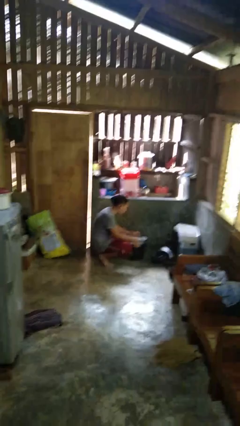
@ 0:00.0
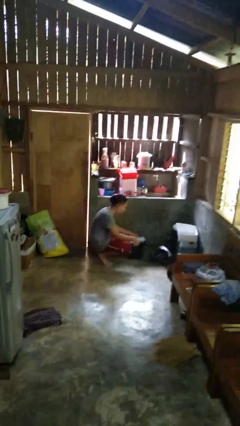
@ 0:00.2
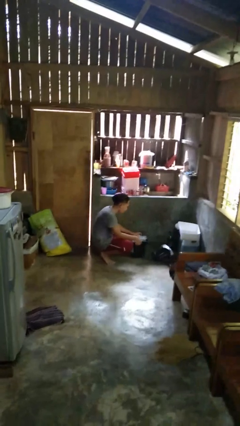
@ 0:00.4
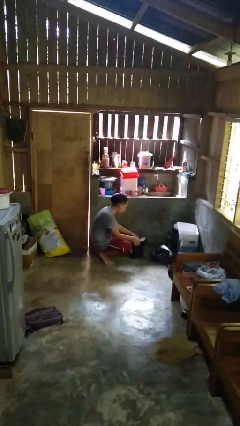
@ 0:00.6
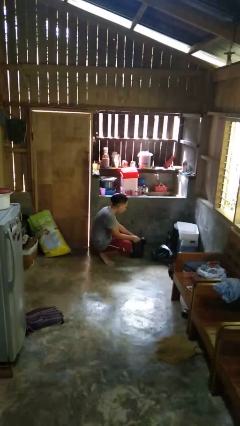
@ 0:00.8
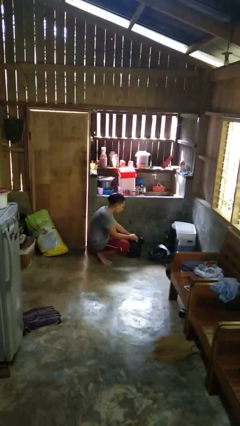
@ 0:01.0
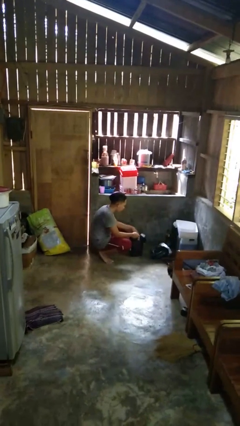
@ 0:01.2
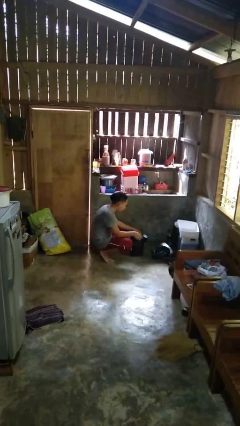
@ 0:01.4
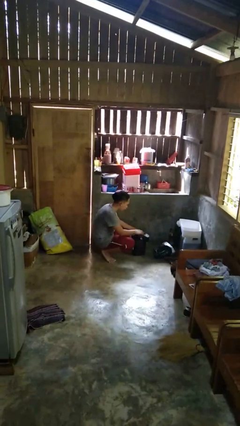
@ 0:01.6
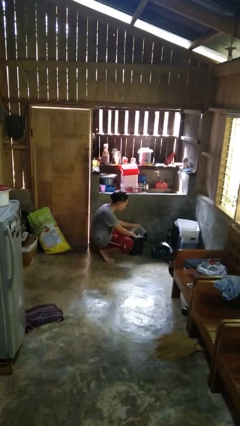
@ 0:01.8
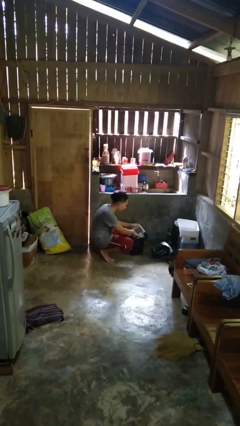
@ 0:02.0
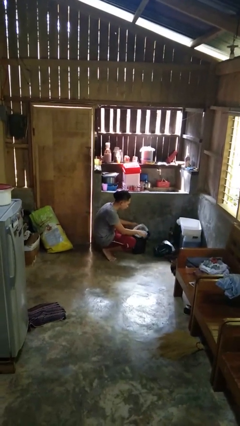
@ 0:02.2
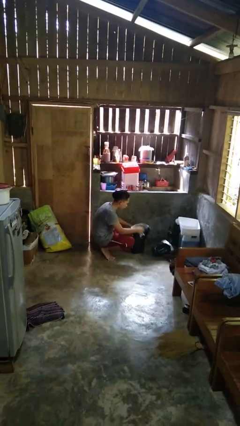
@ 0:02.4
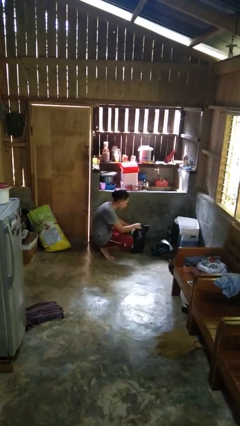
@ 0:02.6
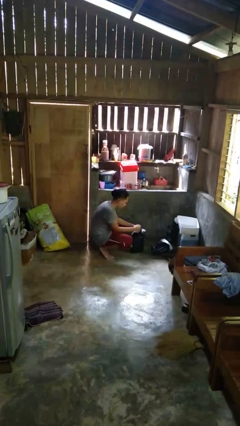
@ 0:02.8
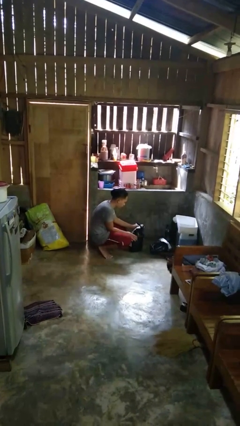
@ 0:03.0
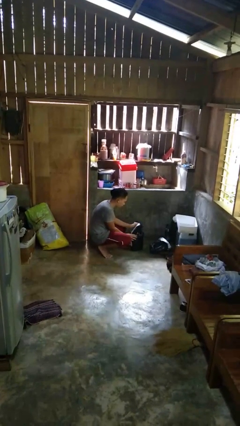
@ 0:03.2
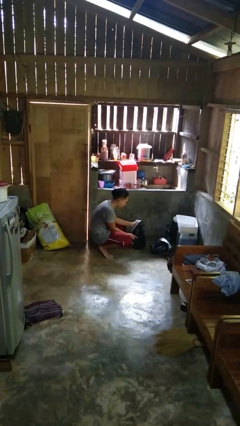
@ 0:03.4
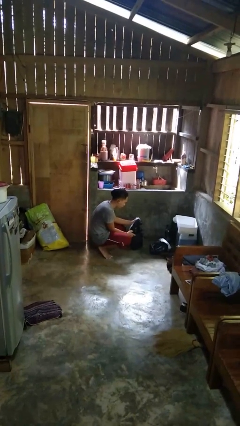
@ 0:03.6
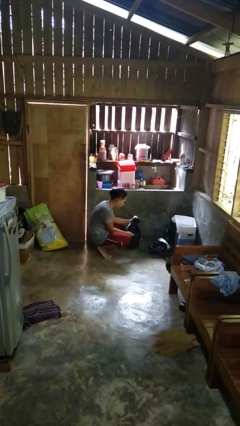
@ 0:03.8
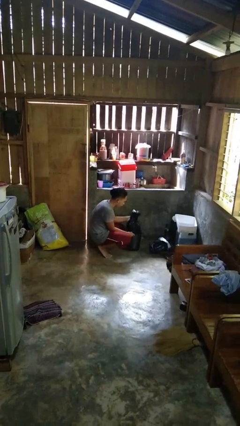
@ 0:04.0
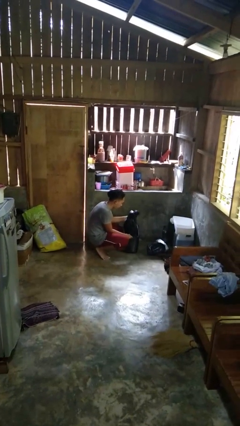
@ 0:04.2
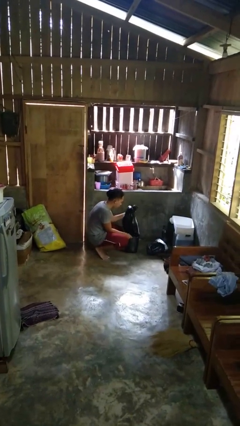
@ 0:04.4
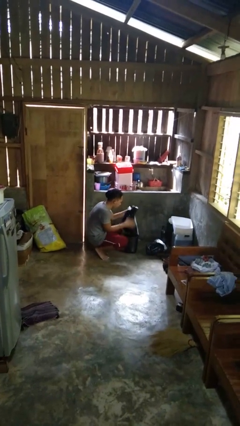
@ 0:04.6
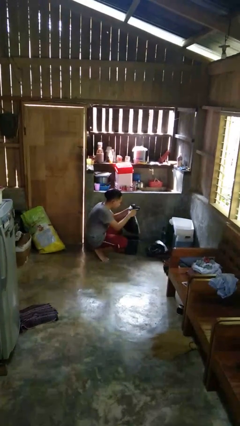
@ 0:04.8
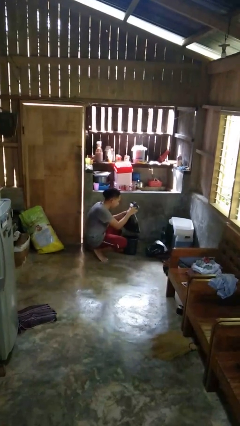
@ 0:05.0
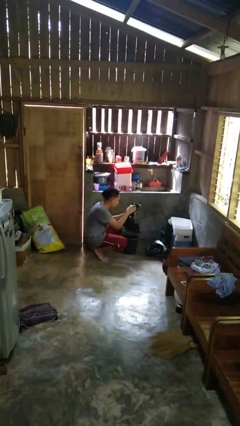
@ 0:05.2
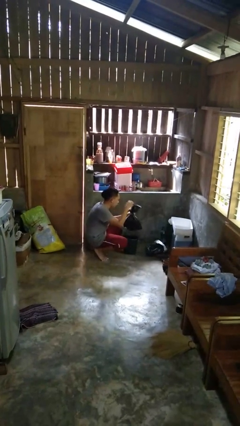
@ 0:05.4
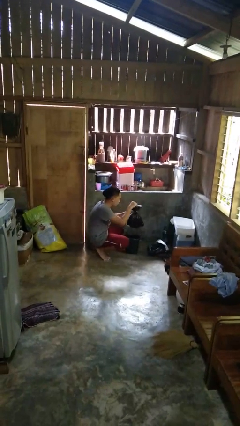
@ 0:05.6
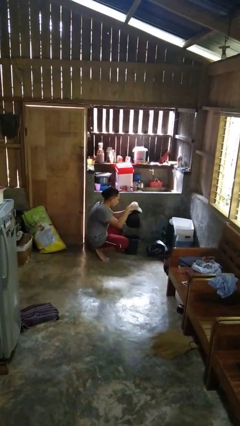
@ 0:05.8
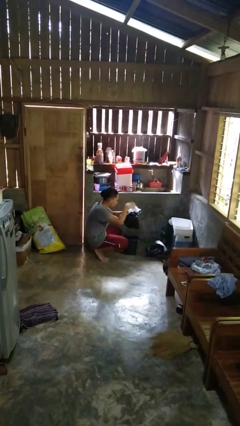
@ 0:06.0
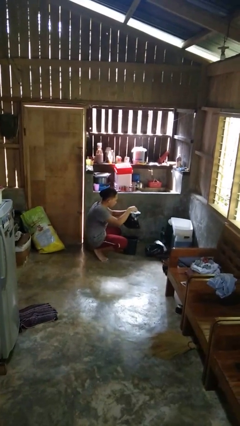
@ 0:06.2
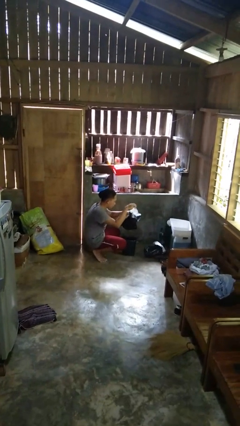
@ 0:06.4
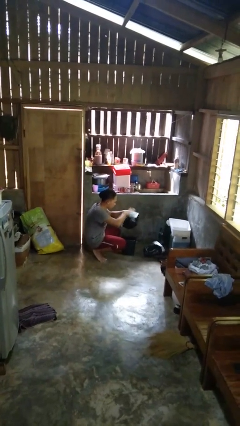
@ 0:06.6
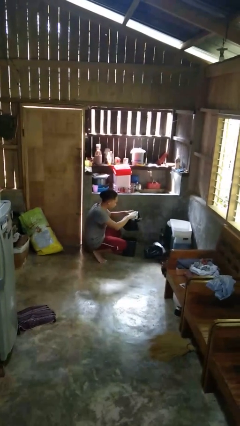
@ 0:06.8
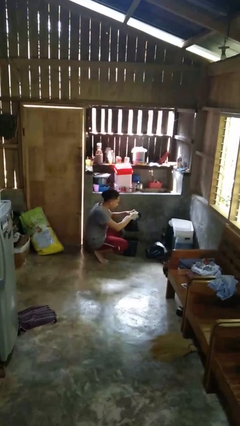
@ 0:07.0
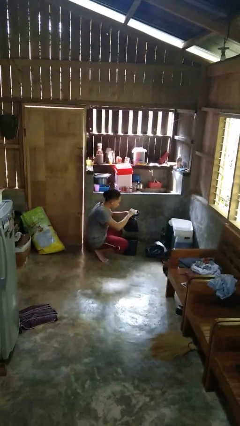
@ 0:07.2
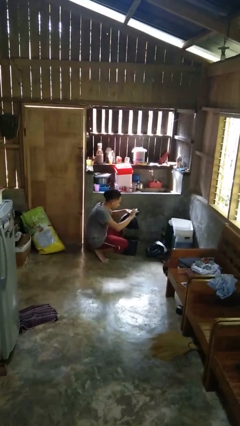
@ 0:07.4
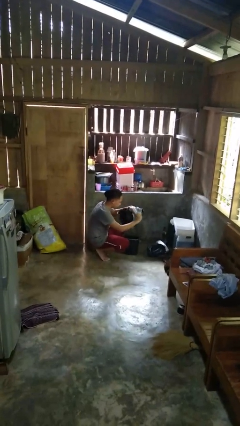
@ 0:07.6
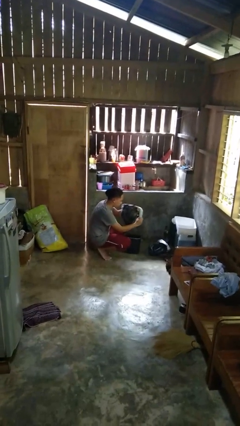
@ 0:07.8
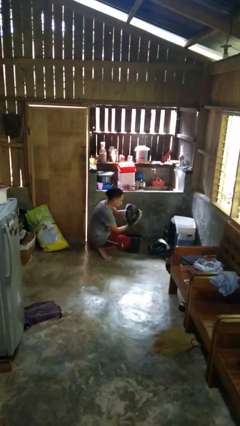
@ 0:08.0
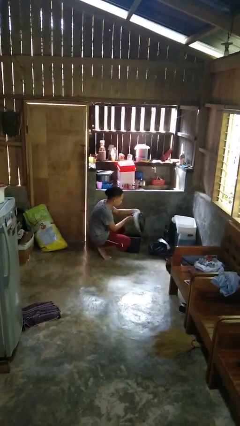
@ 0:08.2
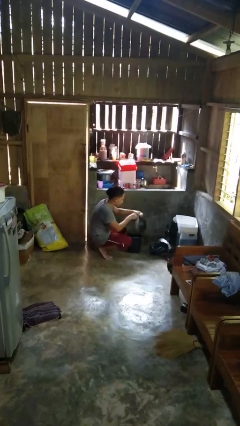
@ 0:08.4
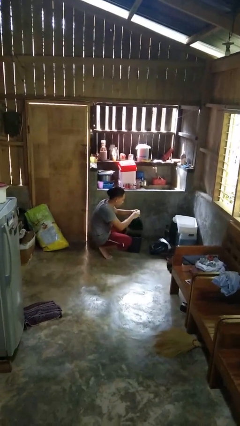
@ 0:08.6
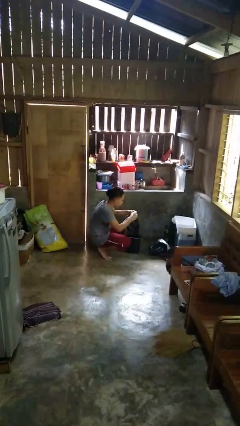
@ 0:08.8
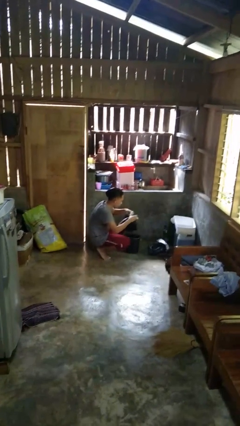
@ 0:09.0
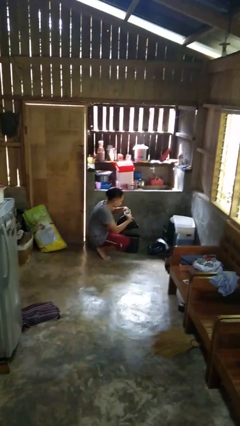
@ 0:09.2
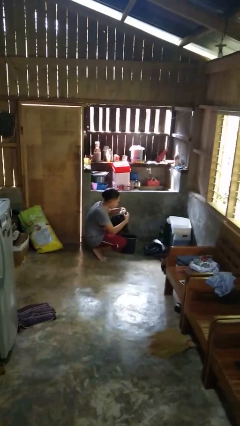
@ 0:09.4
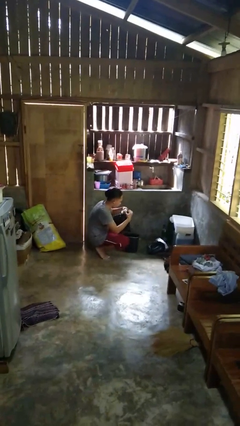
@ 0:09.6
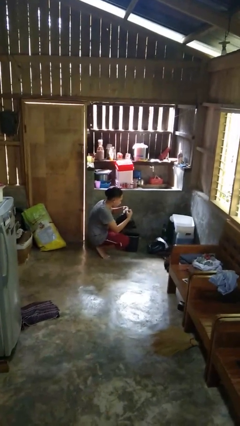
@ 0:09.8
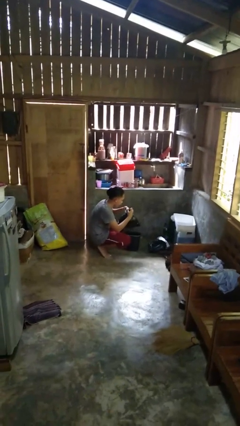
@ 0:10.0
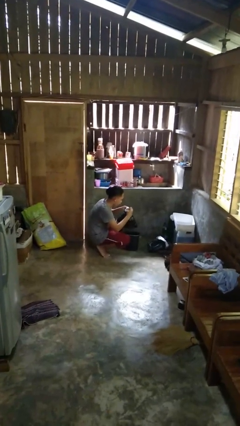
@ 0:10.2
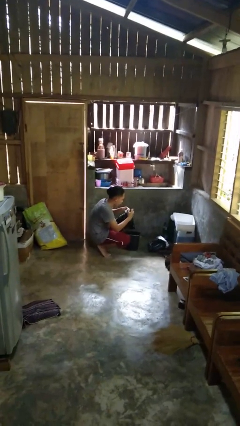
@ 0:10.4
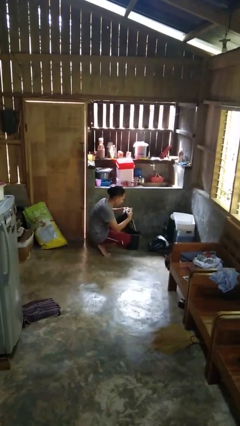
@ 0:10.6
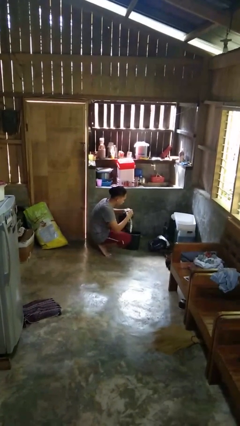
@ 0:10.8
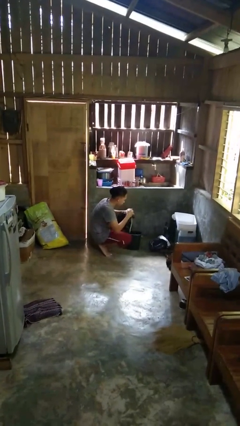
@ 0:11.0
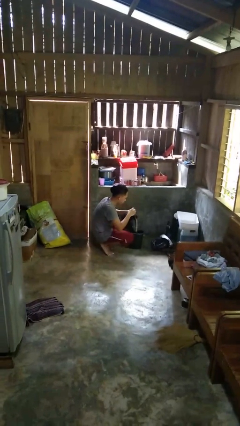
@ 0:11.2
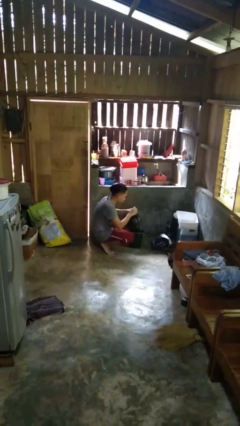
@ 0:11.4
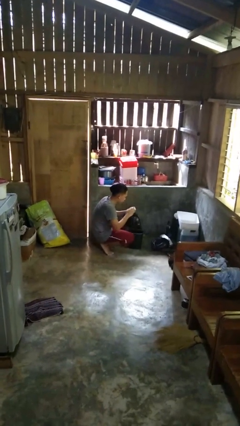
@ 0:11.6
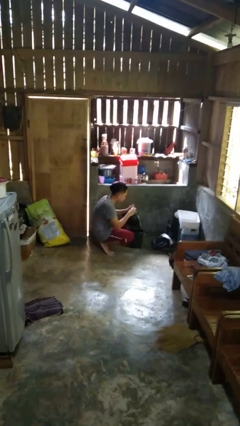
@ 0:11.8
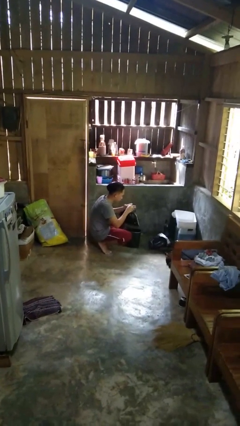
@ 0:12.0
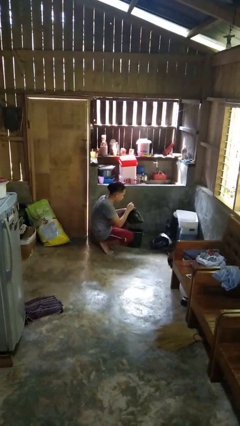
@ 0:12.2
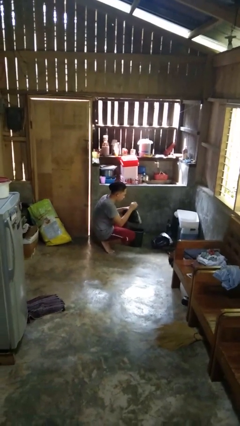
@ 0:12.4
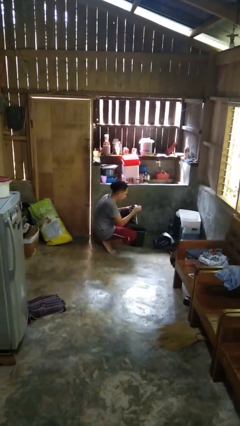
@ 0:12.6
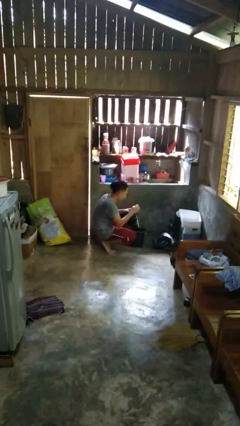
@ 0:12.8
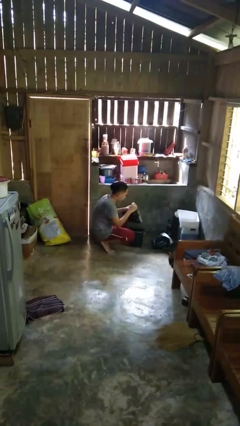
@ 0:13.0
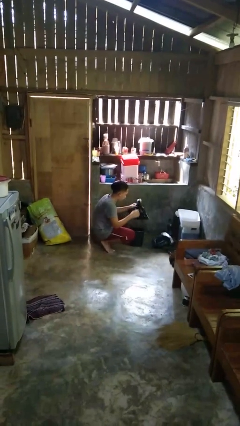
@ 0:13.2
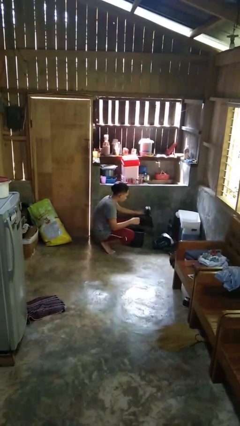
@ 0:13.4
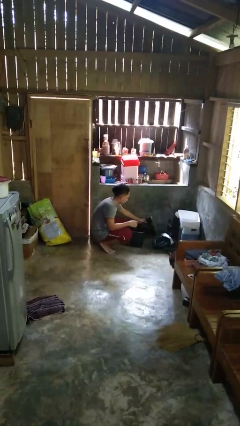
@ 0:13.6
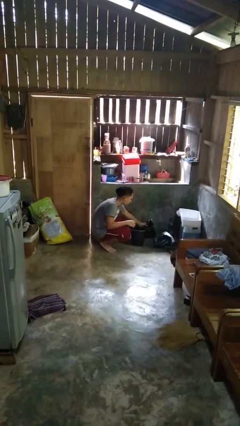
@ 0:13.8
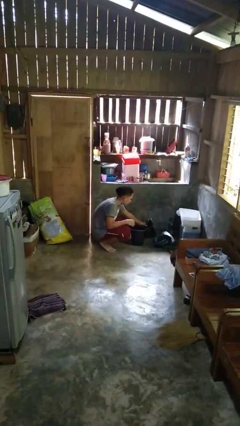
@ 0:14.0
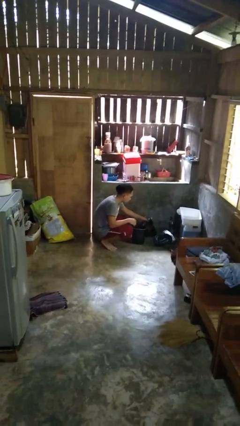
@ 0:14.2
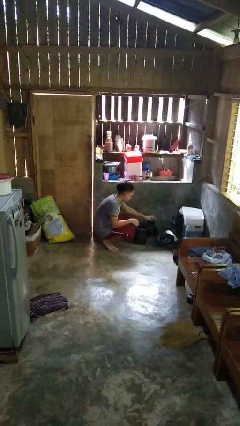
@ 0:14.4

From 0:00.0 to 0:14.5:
person removes trashbag from trashcan

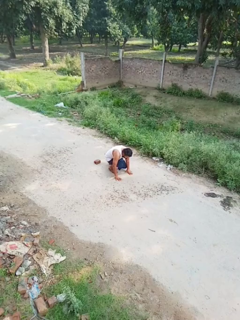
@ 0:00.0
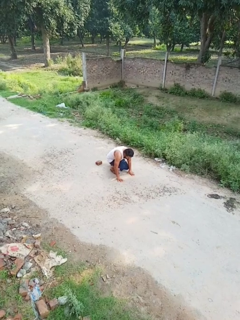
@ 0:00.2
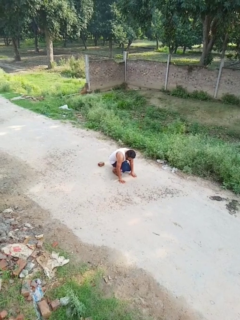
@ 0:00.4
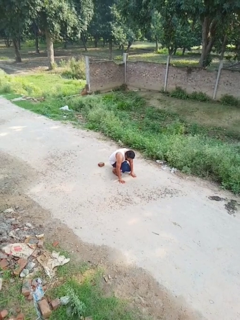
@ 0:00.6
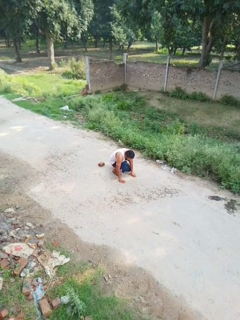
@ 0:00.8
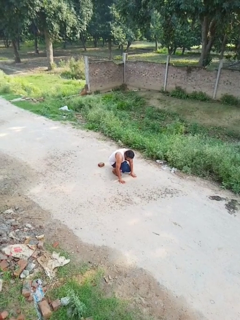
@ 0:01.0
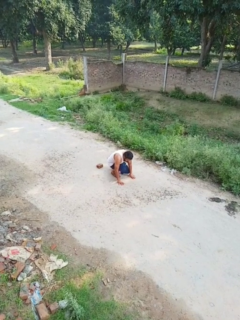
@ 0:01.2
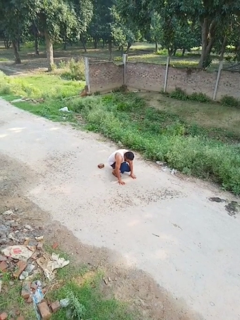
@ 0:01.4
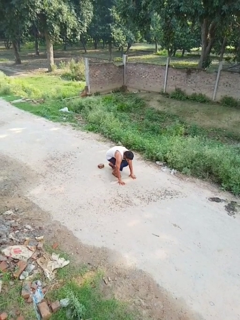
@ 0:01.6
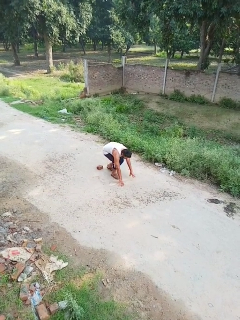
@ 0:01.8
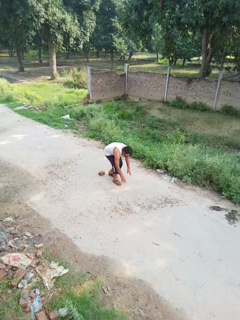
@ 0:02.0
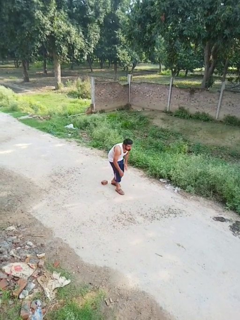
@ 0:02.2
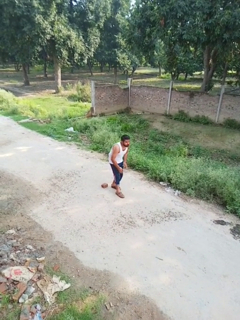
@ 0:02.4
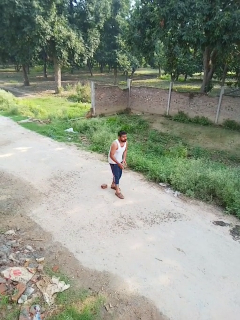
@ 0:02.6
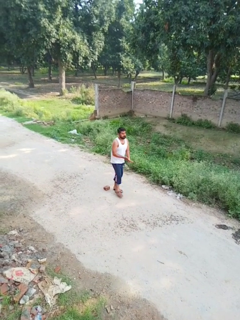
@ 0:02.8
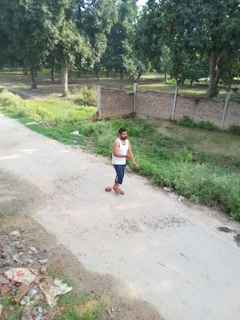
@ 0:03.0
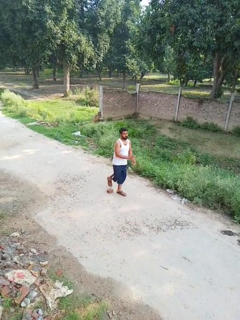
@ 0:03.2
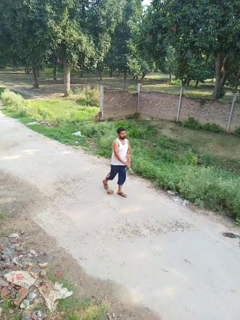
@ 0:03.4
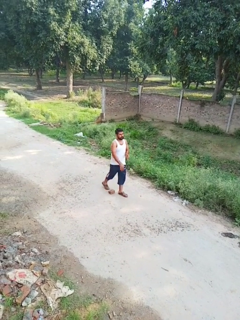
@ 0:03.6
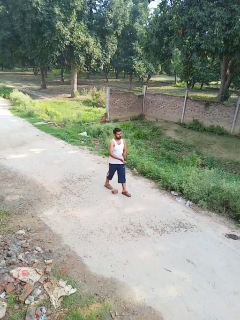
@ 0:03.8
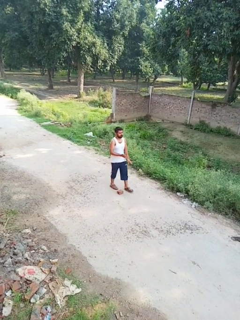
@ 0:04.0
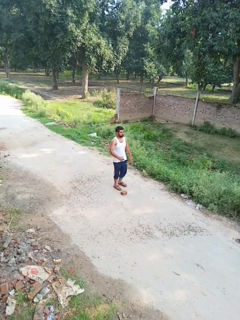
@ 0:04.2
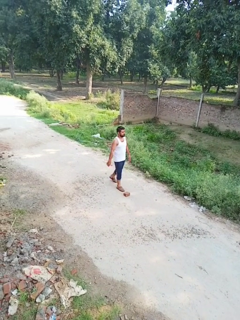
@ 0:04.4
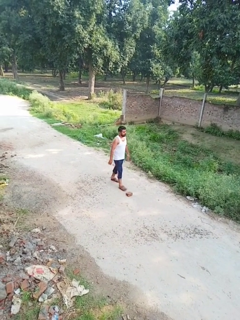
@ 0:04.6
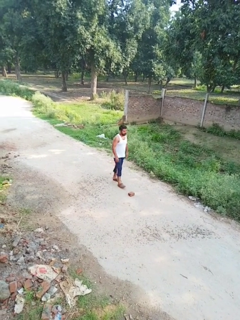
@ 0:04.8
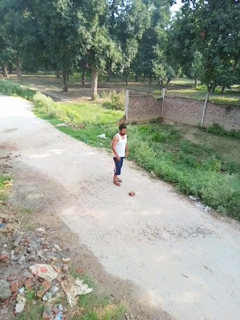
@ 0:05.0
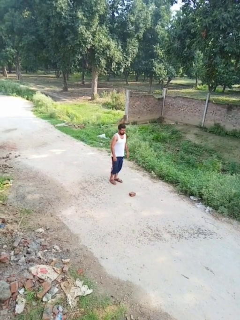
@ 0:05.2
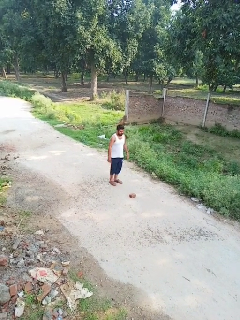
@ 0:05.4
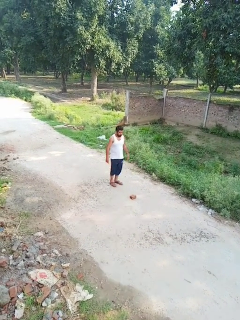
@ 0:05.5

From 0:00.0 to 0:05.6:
person stands up from floor
